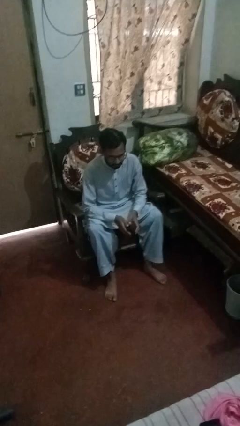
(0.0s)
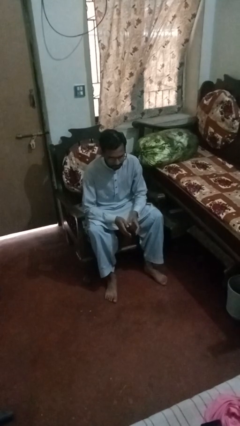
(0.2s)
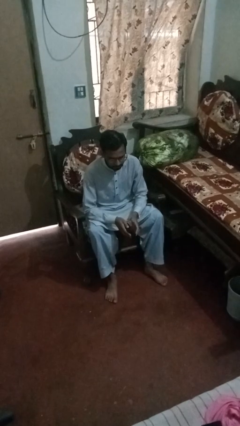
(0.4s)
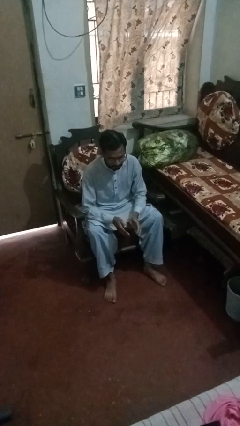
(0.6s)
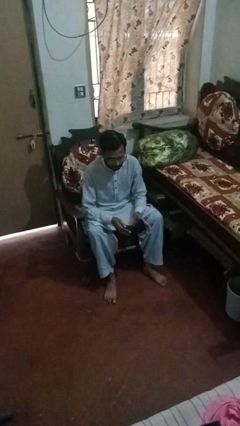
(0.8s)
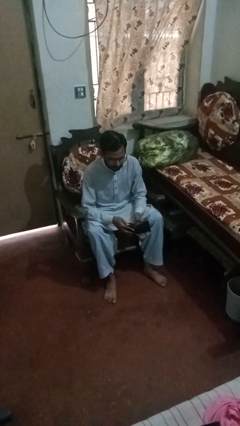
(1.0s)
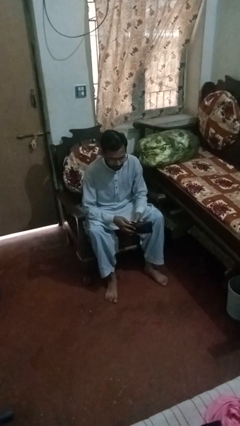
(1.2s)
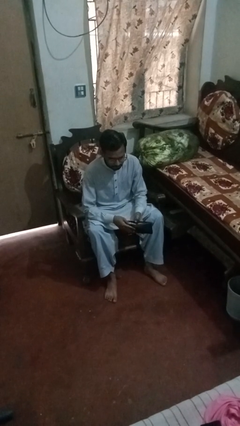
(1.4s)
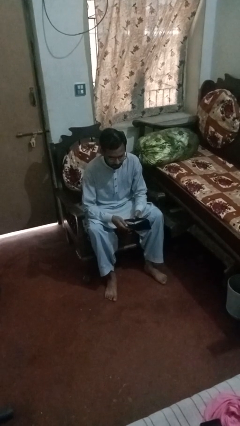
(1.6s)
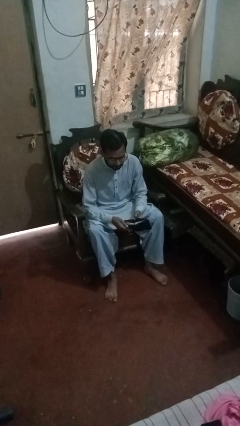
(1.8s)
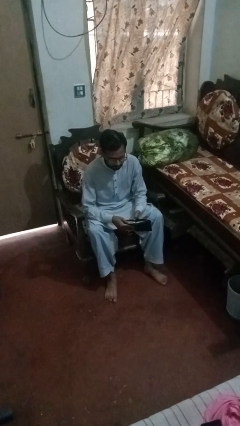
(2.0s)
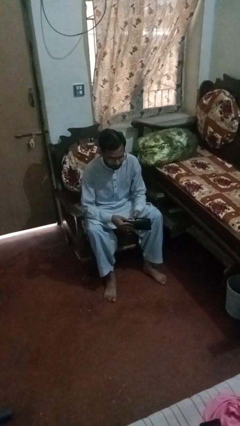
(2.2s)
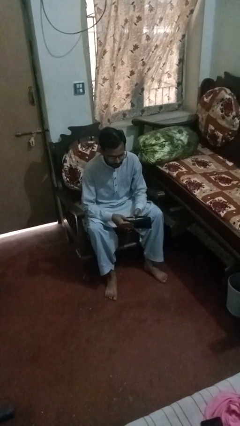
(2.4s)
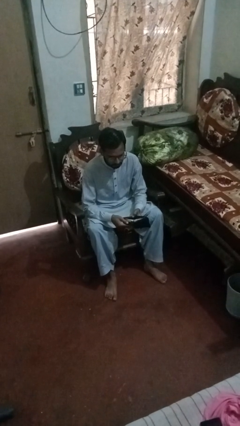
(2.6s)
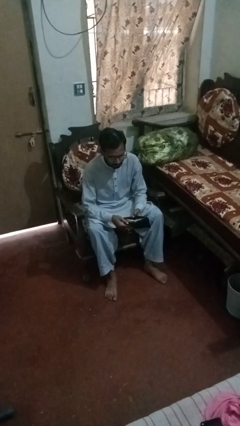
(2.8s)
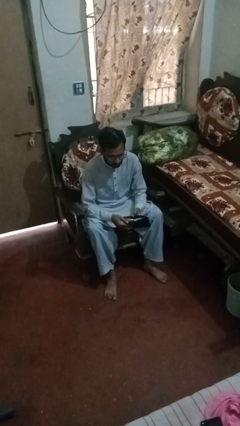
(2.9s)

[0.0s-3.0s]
person searches in purse

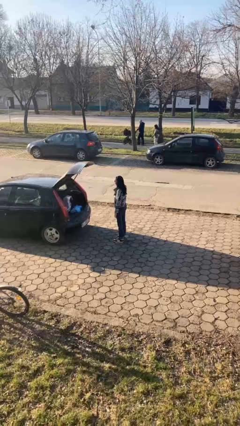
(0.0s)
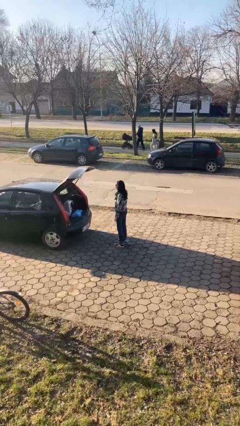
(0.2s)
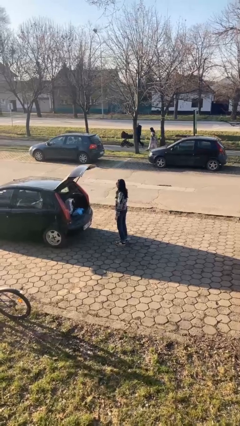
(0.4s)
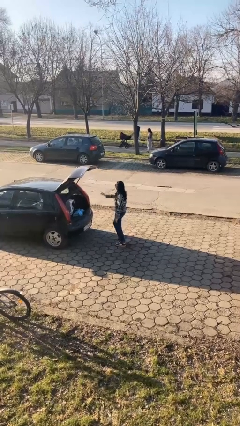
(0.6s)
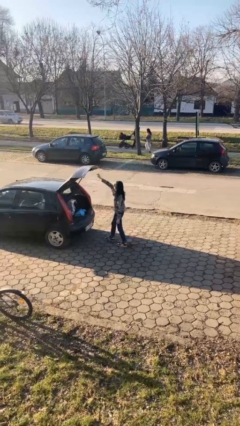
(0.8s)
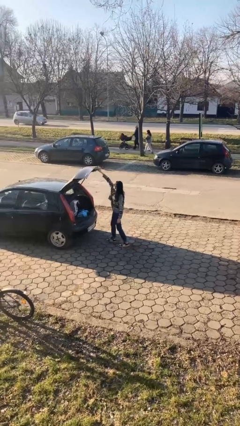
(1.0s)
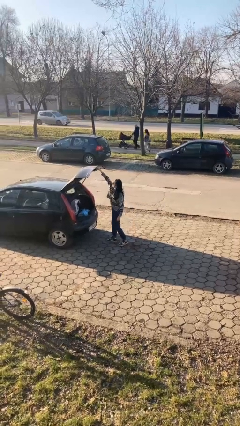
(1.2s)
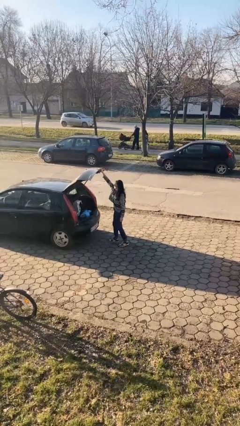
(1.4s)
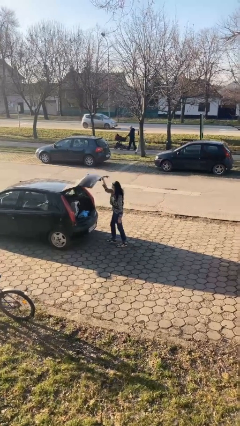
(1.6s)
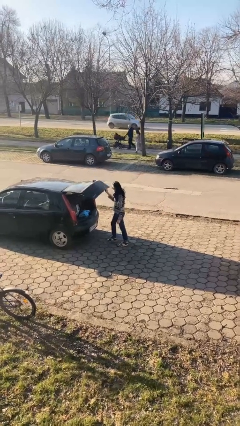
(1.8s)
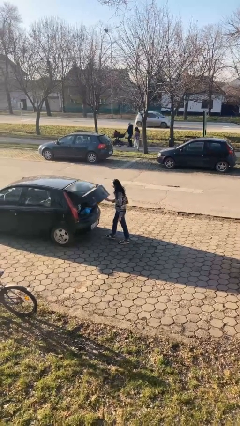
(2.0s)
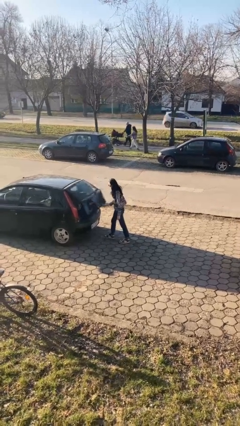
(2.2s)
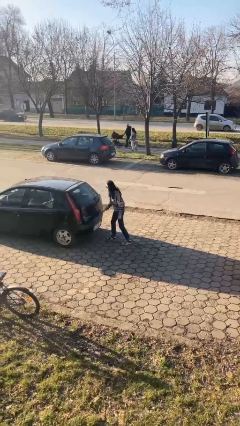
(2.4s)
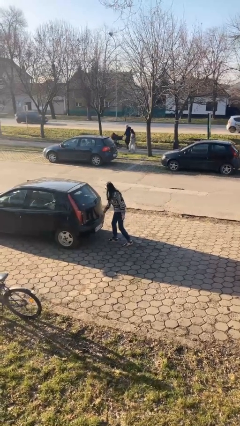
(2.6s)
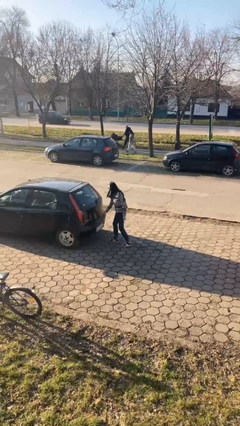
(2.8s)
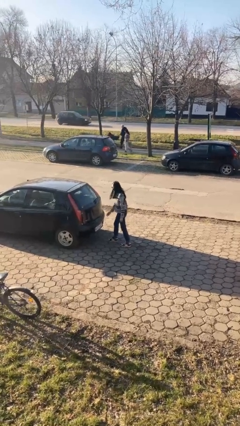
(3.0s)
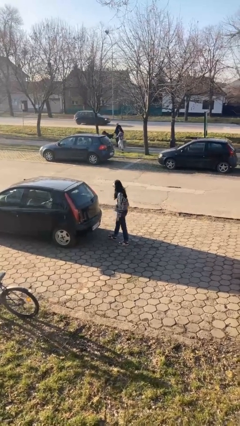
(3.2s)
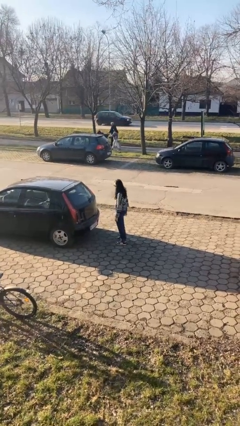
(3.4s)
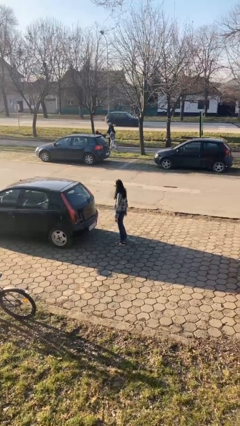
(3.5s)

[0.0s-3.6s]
person closes car trunk

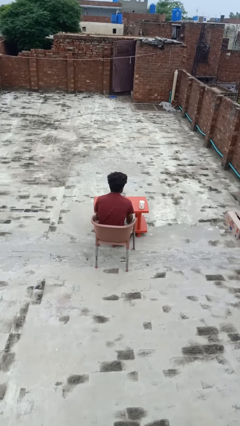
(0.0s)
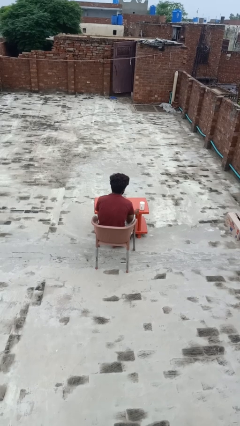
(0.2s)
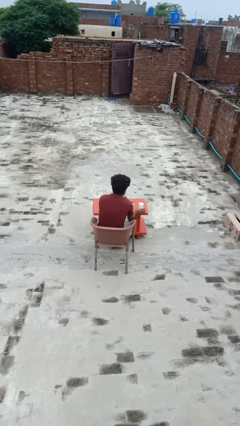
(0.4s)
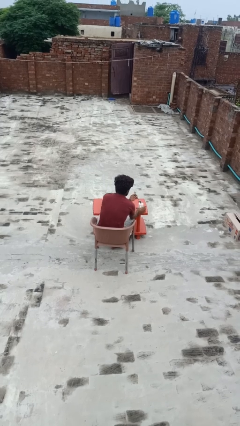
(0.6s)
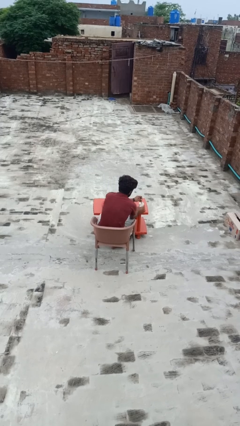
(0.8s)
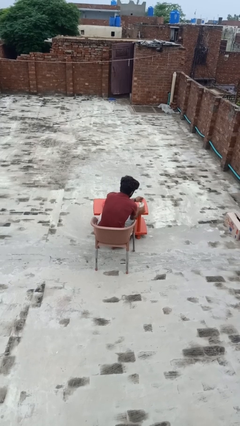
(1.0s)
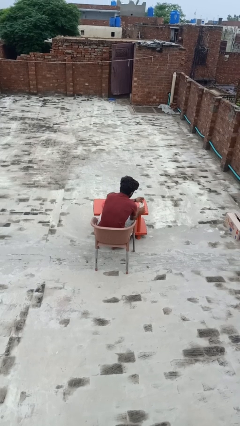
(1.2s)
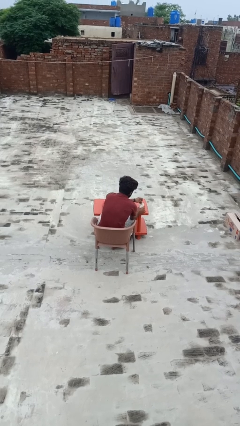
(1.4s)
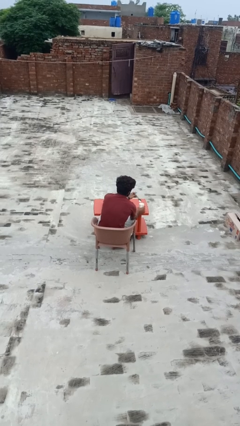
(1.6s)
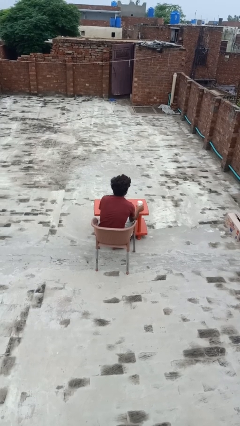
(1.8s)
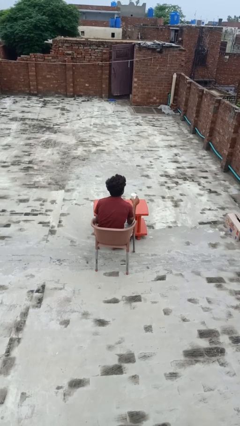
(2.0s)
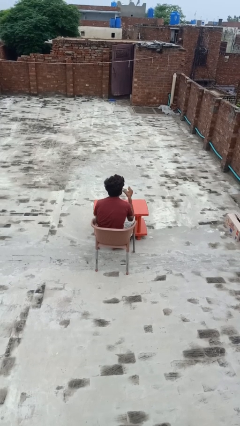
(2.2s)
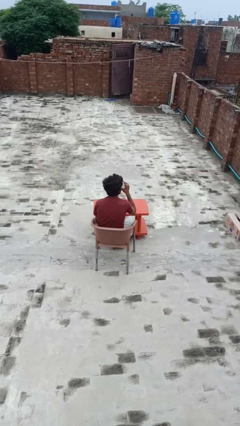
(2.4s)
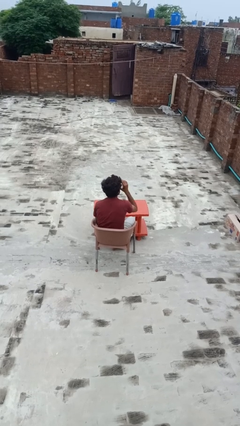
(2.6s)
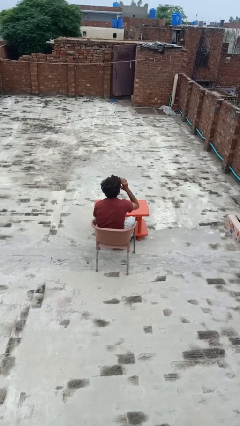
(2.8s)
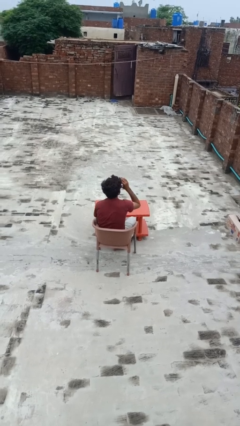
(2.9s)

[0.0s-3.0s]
person stirs mug

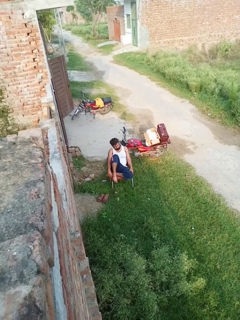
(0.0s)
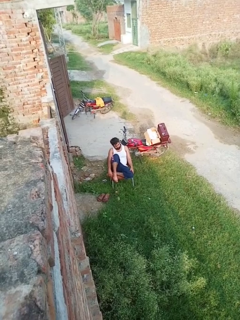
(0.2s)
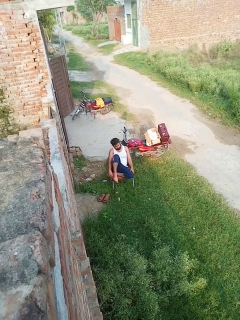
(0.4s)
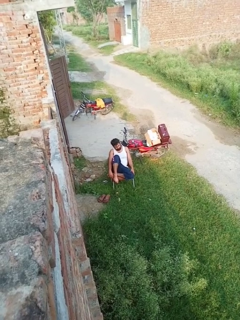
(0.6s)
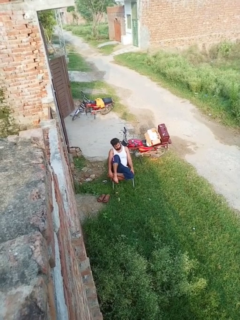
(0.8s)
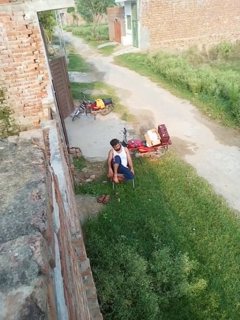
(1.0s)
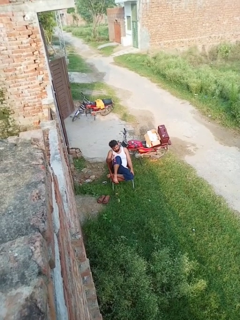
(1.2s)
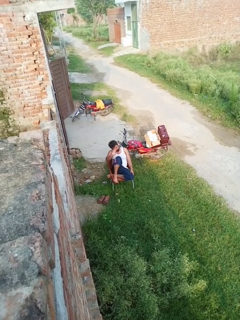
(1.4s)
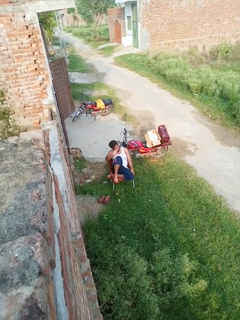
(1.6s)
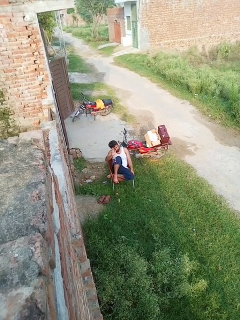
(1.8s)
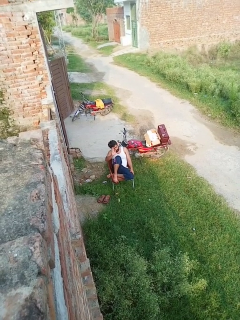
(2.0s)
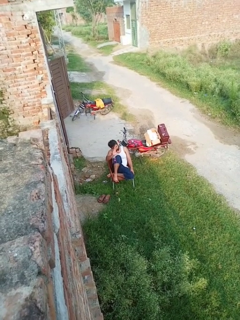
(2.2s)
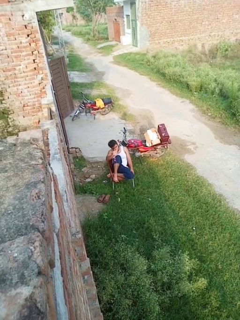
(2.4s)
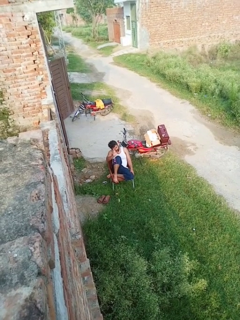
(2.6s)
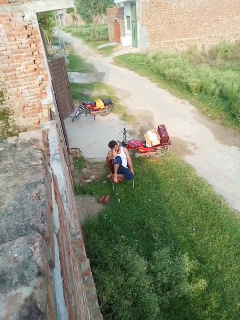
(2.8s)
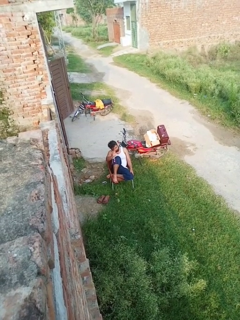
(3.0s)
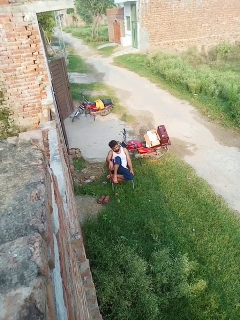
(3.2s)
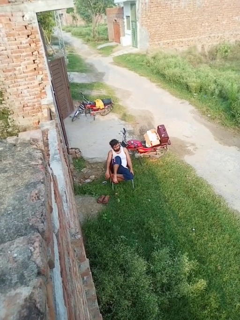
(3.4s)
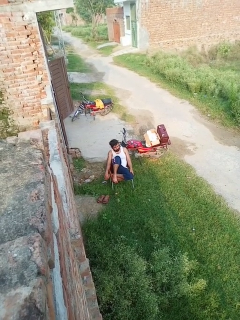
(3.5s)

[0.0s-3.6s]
person waves at person

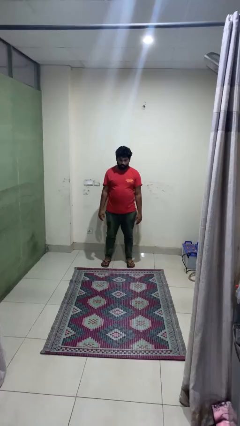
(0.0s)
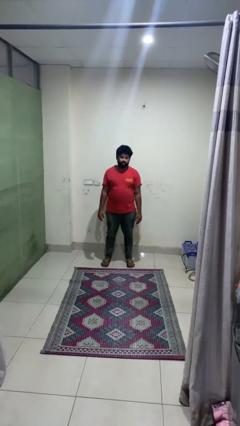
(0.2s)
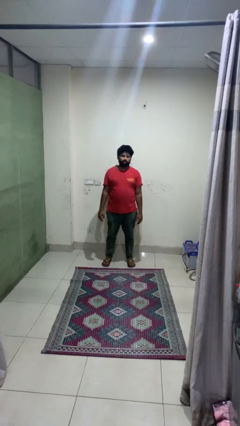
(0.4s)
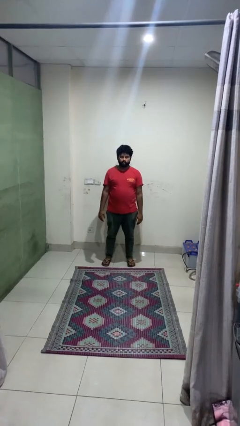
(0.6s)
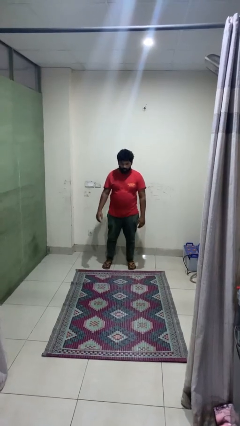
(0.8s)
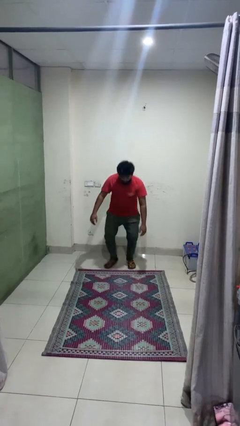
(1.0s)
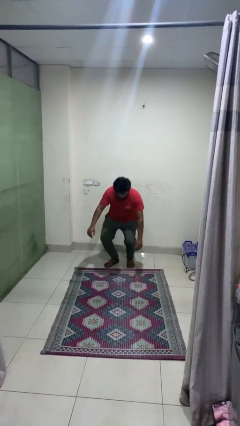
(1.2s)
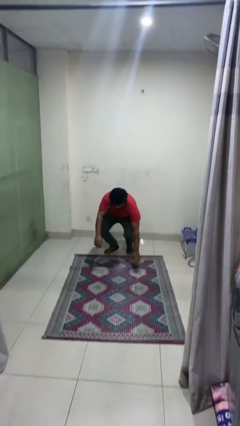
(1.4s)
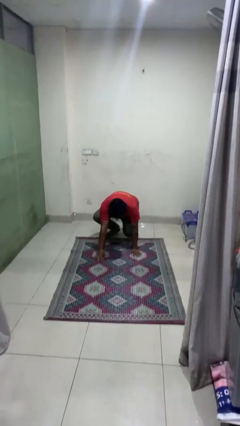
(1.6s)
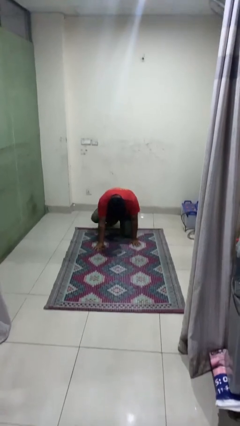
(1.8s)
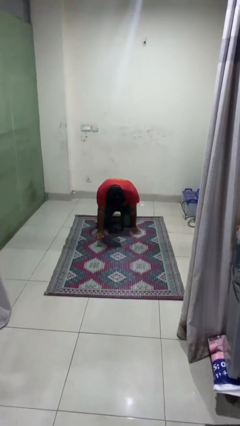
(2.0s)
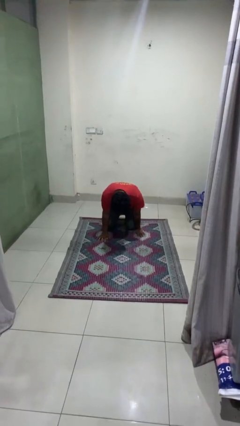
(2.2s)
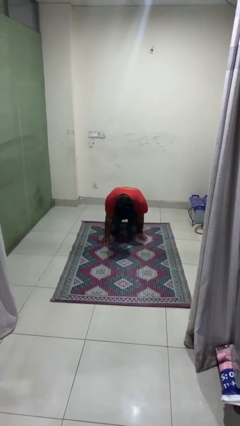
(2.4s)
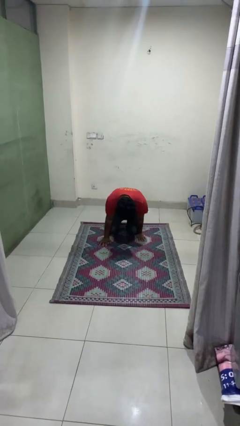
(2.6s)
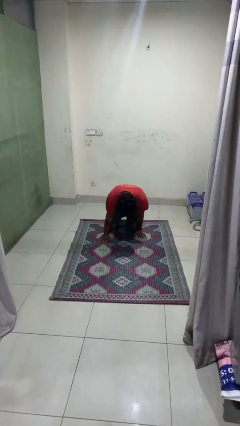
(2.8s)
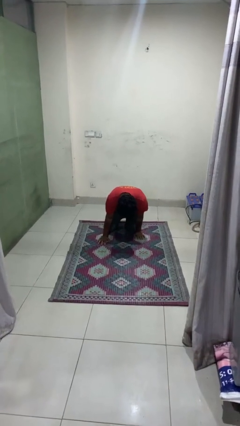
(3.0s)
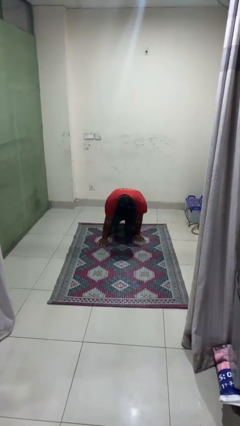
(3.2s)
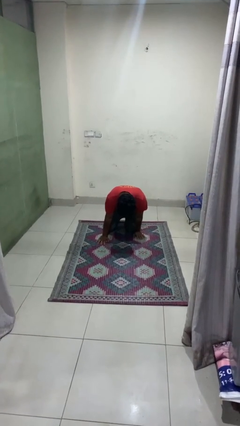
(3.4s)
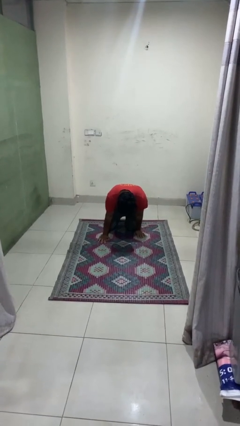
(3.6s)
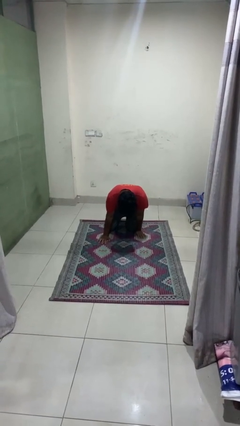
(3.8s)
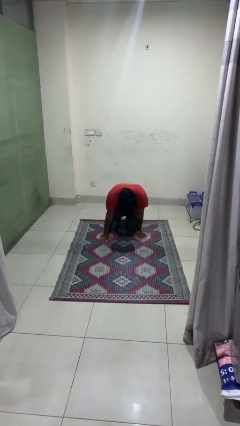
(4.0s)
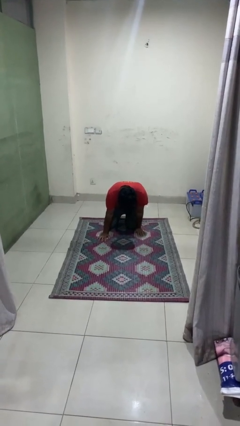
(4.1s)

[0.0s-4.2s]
person falls while standing

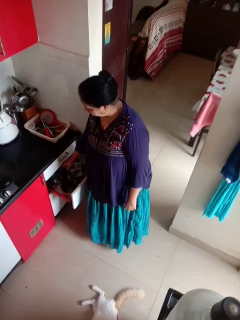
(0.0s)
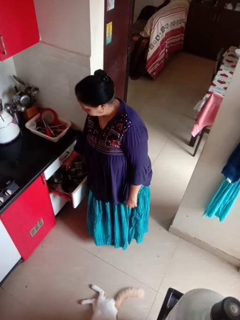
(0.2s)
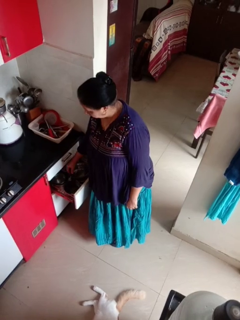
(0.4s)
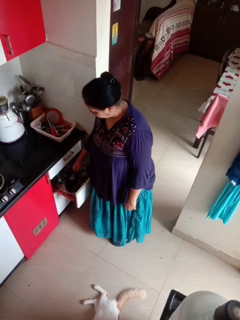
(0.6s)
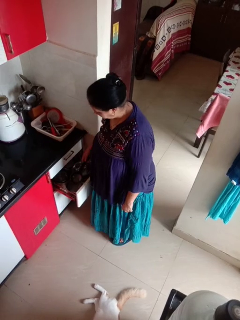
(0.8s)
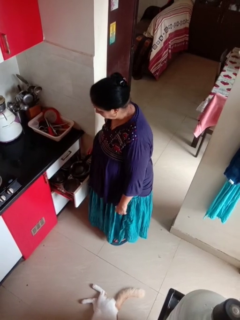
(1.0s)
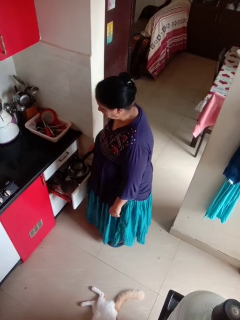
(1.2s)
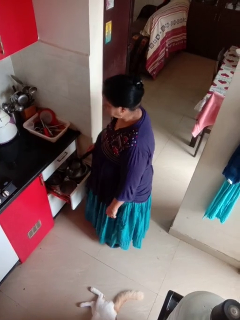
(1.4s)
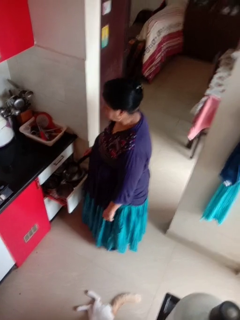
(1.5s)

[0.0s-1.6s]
person takes object from kitchen drawer

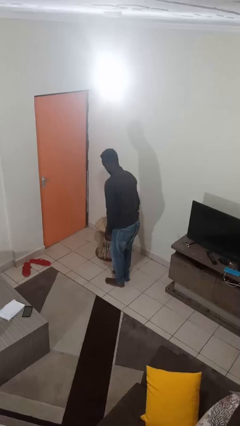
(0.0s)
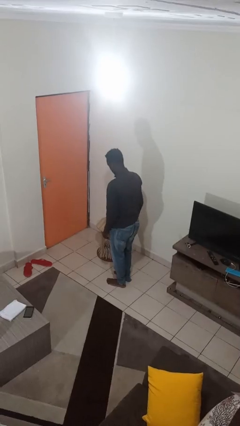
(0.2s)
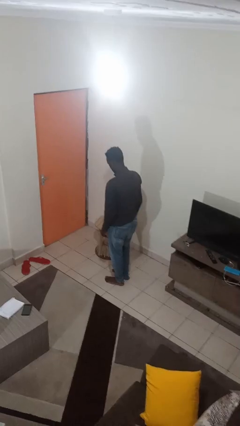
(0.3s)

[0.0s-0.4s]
person stubs toe
